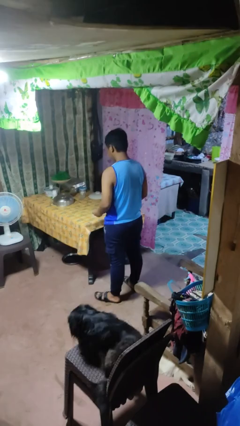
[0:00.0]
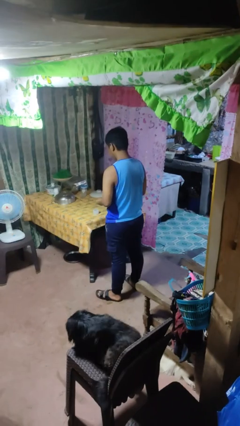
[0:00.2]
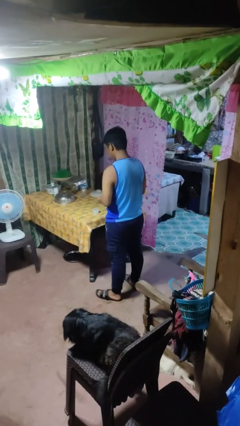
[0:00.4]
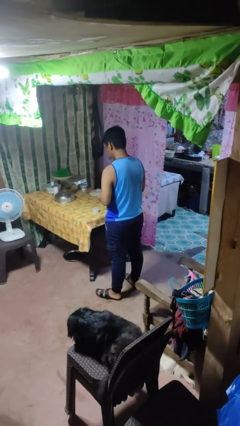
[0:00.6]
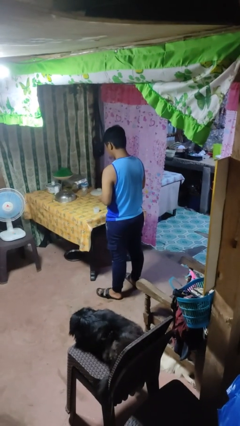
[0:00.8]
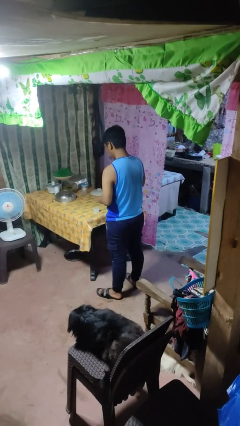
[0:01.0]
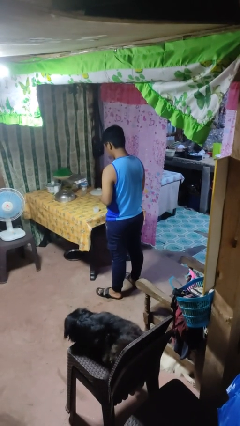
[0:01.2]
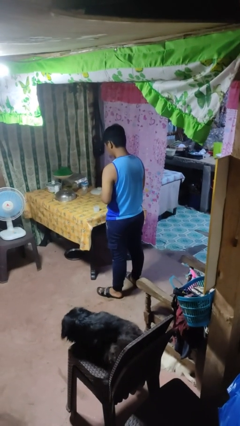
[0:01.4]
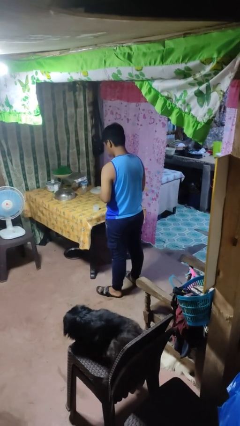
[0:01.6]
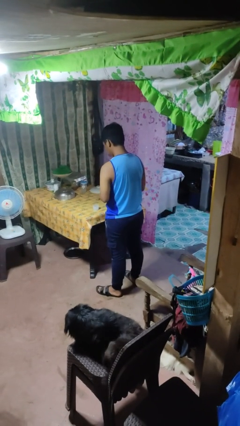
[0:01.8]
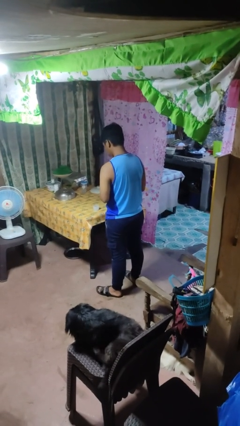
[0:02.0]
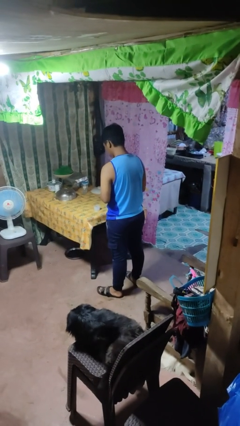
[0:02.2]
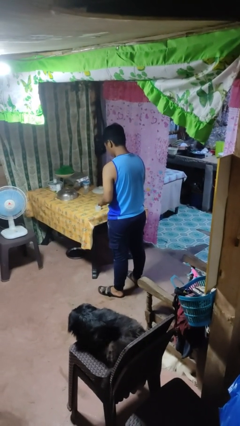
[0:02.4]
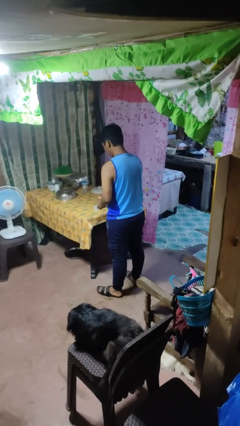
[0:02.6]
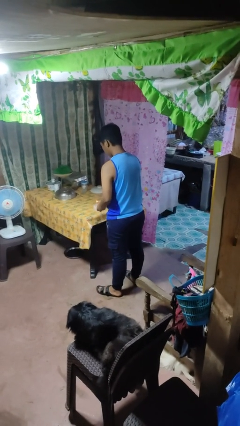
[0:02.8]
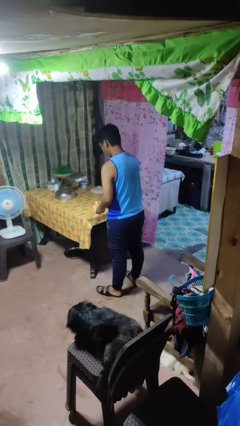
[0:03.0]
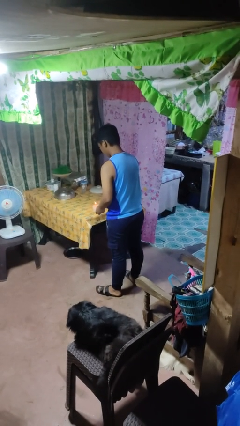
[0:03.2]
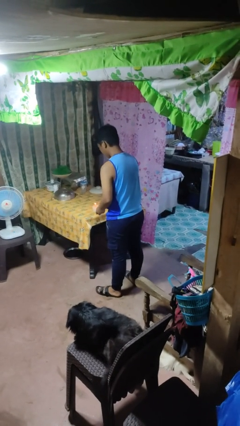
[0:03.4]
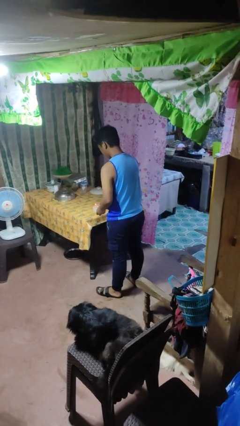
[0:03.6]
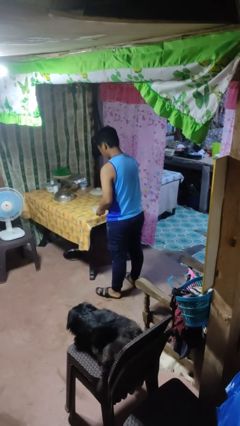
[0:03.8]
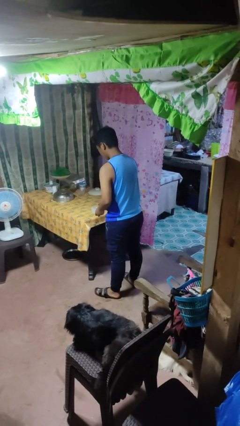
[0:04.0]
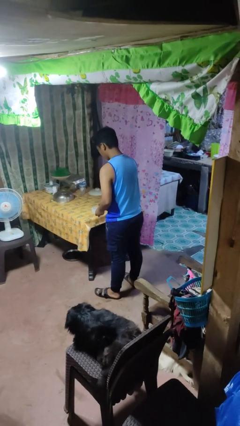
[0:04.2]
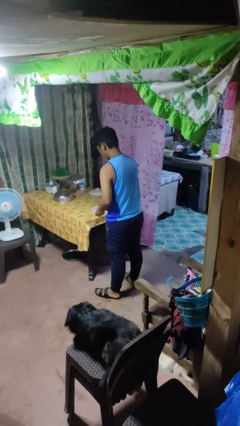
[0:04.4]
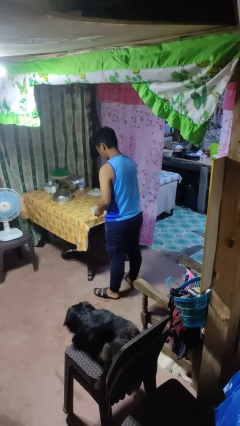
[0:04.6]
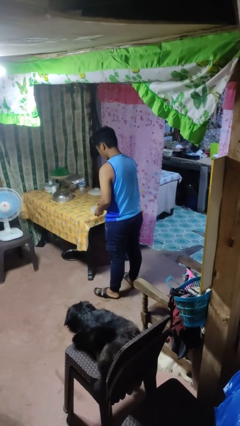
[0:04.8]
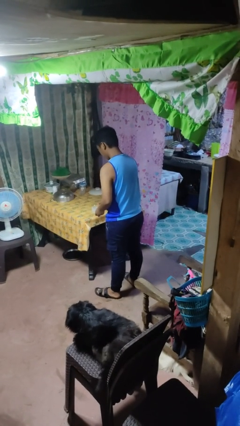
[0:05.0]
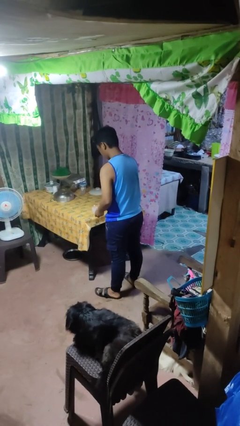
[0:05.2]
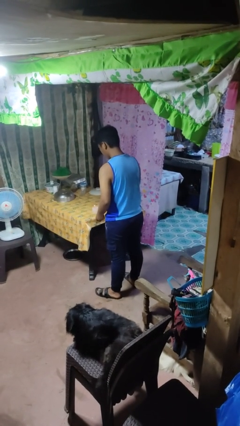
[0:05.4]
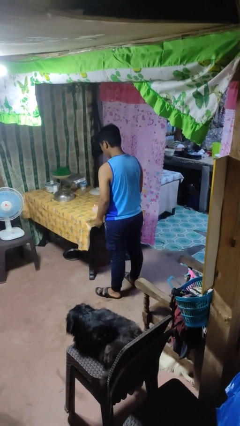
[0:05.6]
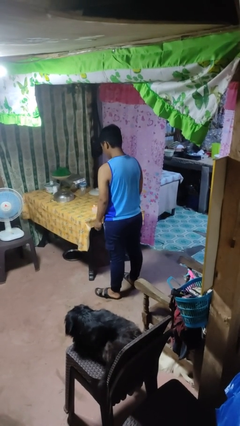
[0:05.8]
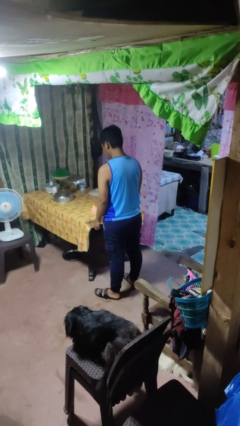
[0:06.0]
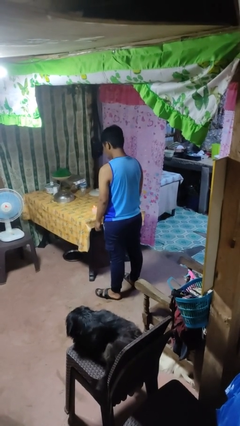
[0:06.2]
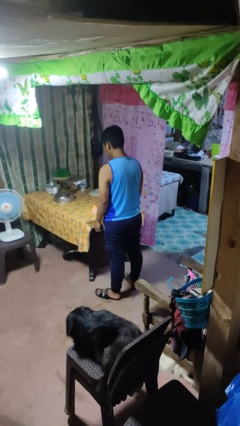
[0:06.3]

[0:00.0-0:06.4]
person lights candle

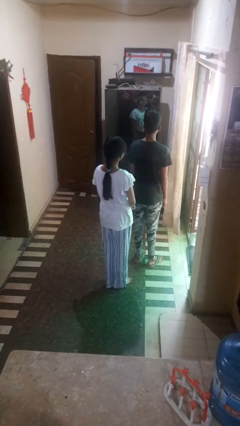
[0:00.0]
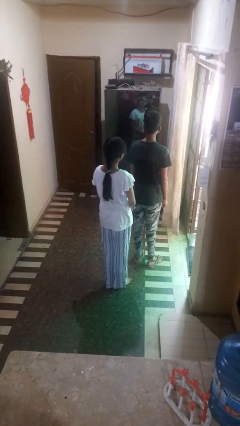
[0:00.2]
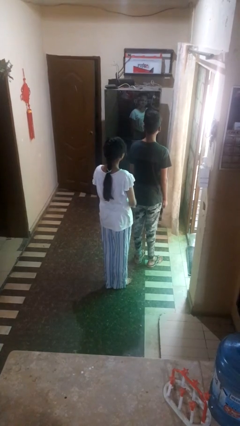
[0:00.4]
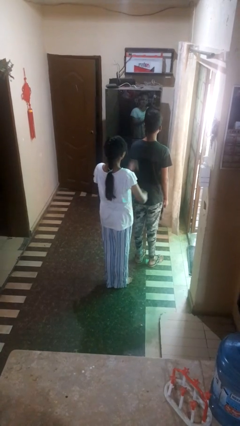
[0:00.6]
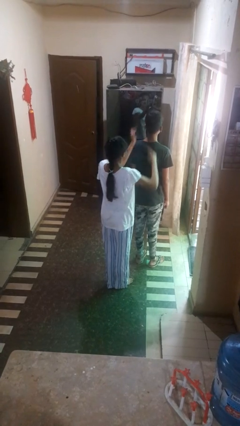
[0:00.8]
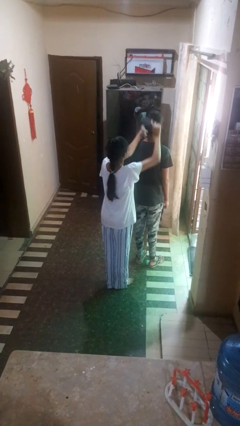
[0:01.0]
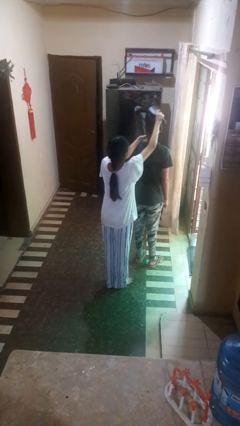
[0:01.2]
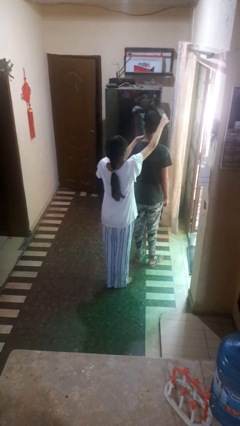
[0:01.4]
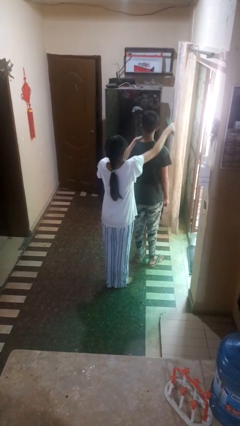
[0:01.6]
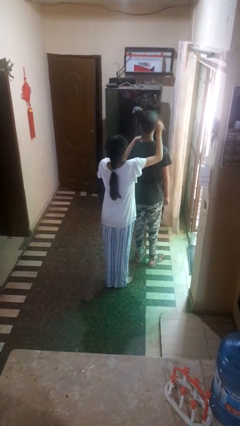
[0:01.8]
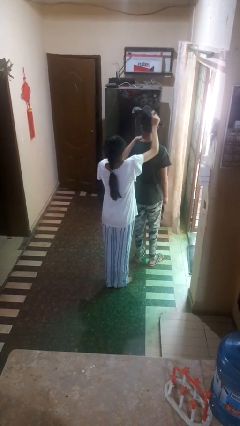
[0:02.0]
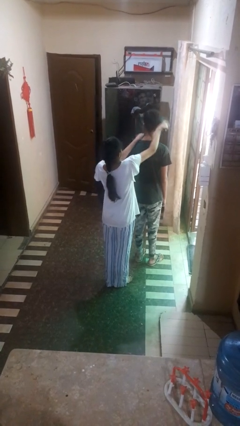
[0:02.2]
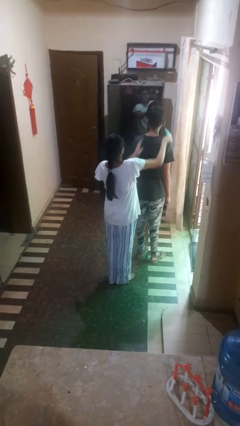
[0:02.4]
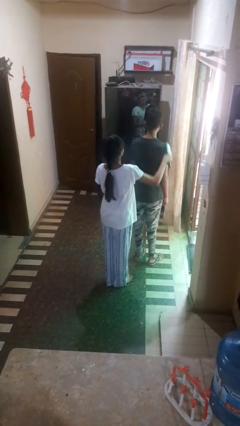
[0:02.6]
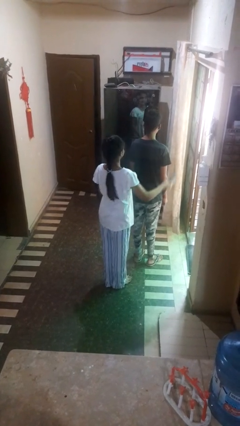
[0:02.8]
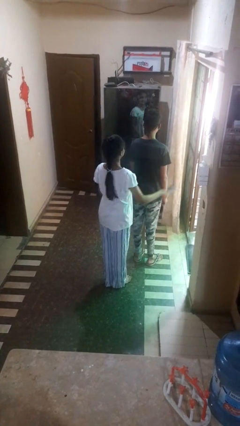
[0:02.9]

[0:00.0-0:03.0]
person brushes hair of person

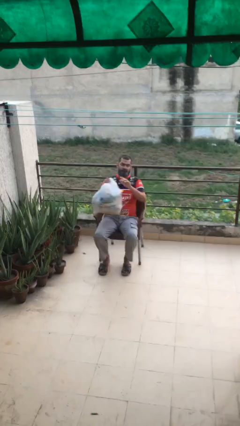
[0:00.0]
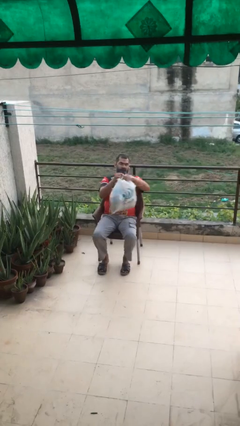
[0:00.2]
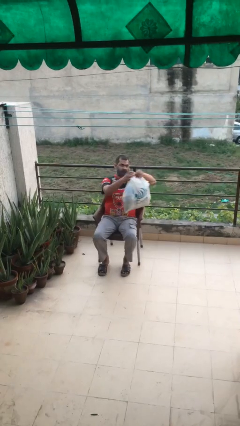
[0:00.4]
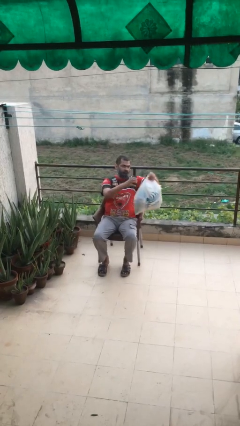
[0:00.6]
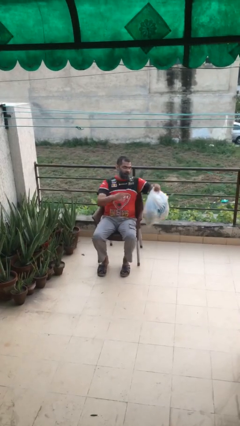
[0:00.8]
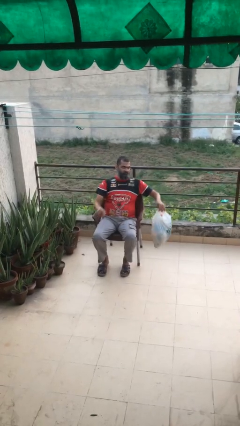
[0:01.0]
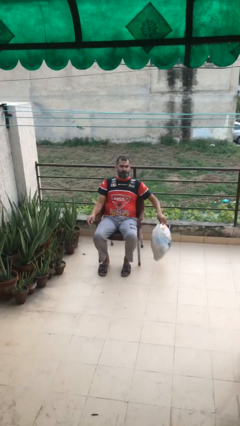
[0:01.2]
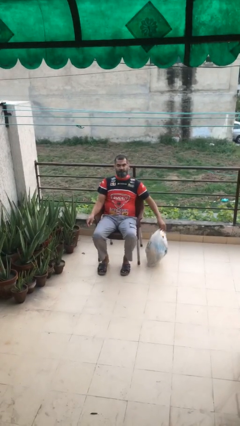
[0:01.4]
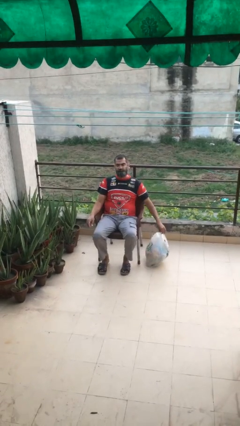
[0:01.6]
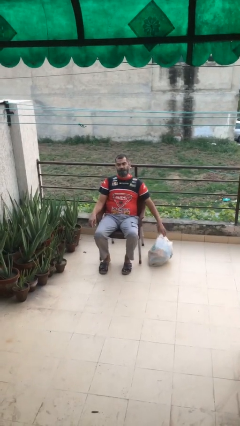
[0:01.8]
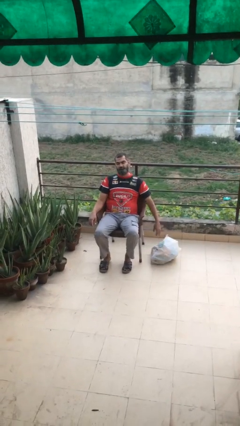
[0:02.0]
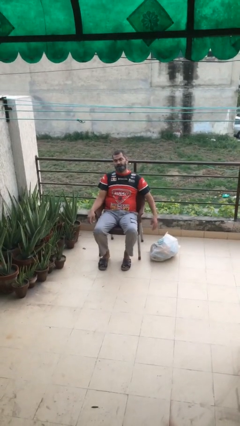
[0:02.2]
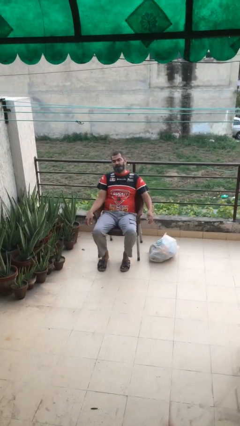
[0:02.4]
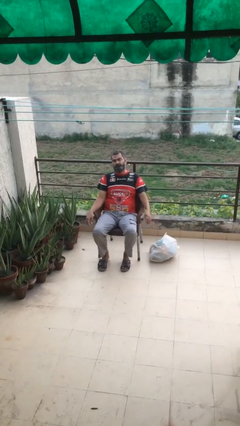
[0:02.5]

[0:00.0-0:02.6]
person puts down object on floor

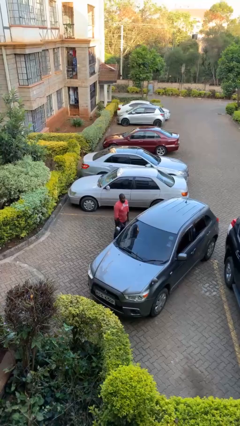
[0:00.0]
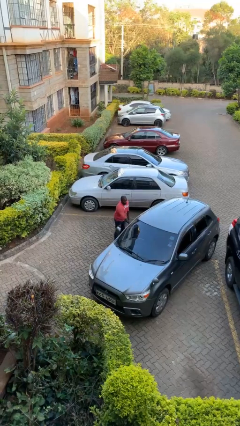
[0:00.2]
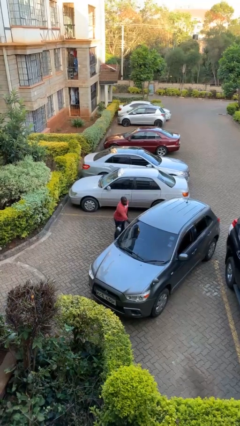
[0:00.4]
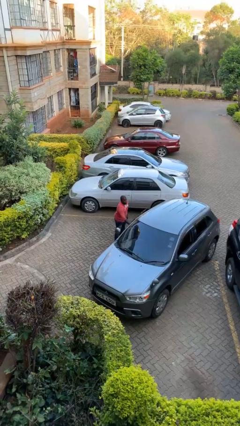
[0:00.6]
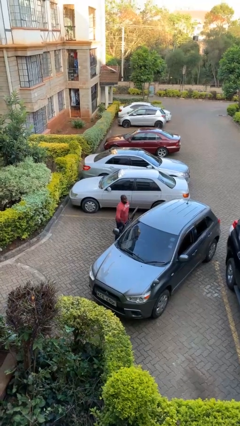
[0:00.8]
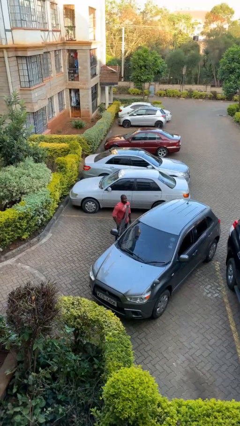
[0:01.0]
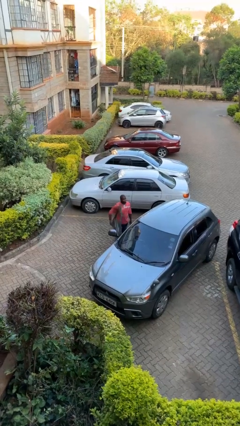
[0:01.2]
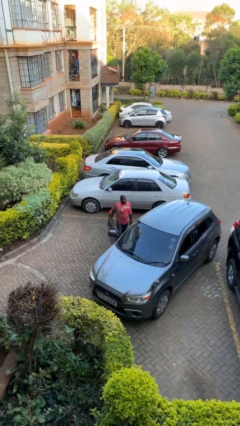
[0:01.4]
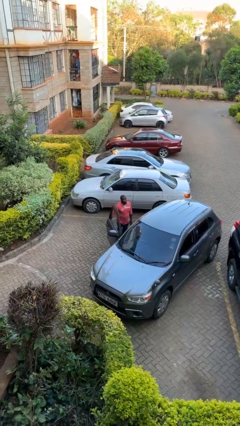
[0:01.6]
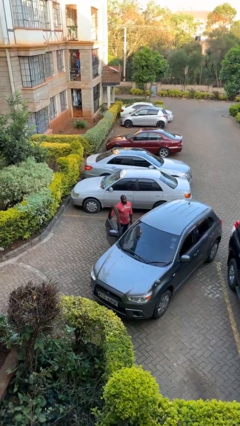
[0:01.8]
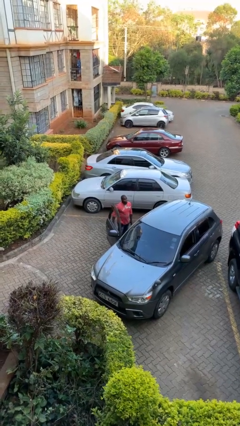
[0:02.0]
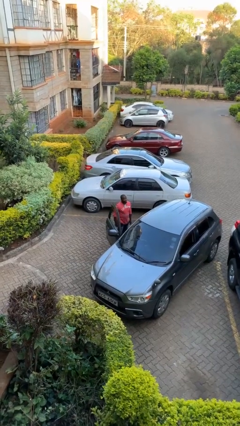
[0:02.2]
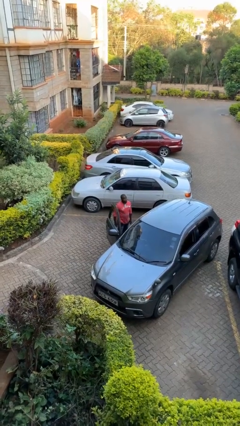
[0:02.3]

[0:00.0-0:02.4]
person opens car door

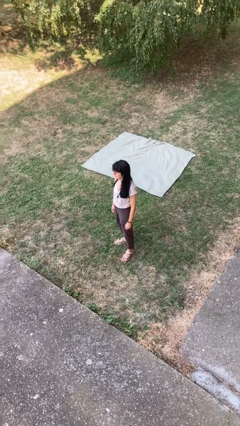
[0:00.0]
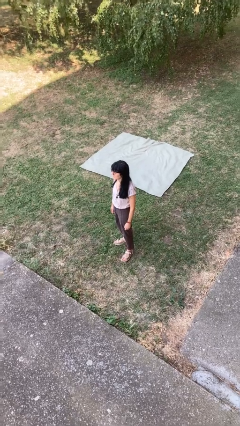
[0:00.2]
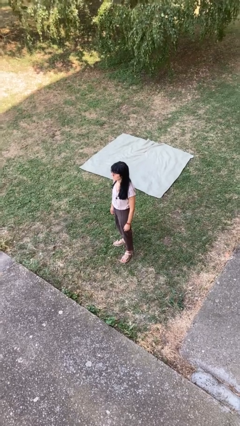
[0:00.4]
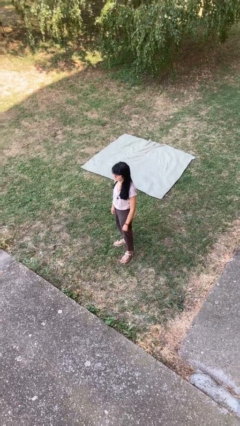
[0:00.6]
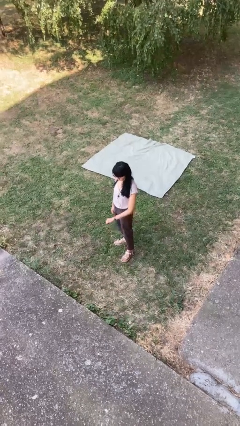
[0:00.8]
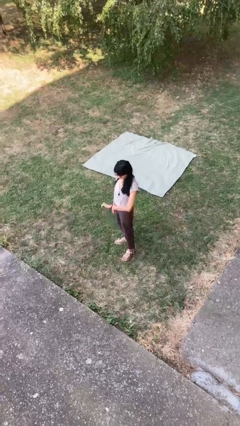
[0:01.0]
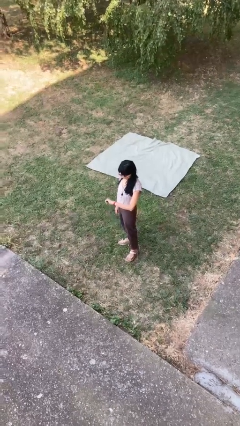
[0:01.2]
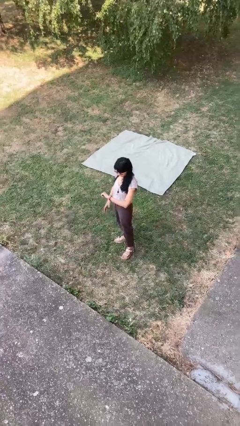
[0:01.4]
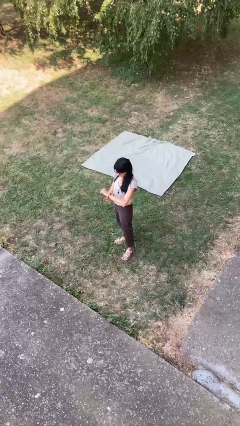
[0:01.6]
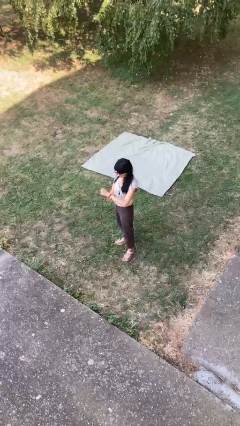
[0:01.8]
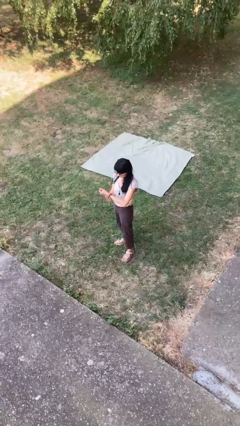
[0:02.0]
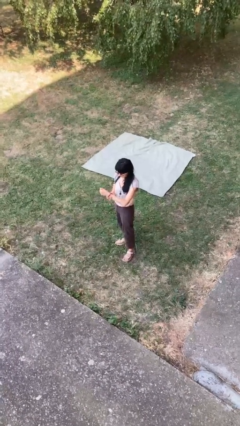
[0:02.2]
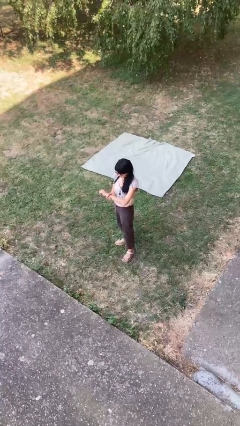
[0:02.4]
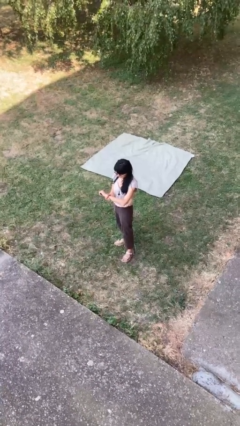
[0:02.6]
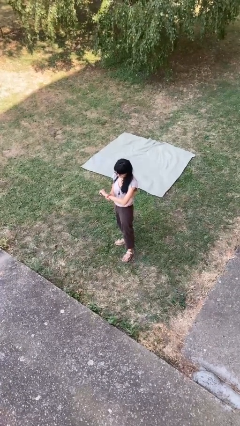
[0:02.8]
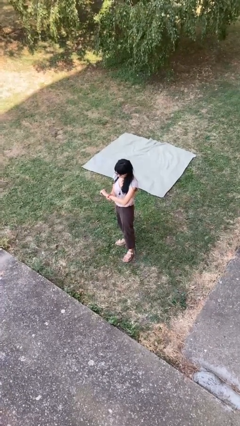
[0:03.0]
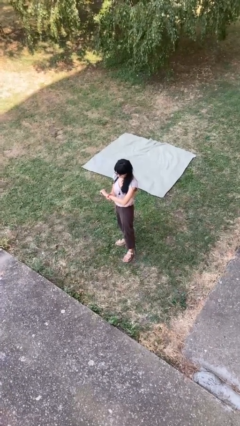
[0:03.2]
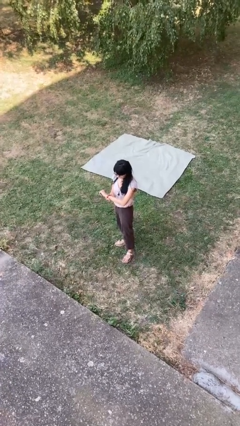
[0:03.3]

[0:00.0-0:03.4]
person looks at wristwatch
